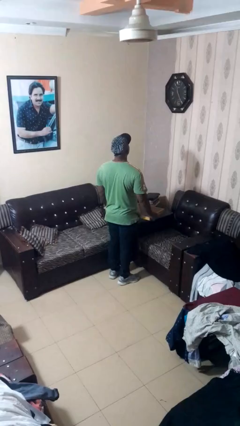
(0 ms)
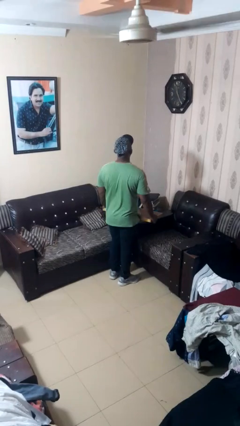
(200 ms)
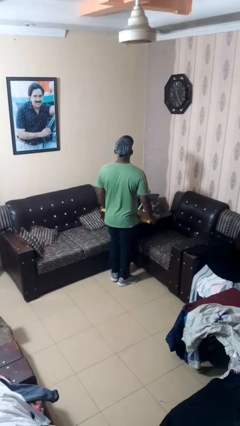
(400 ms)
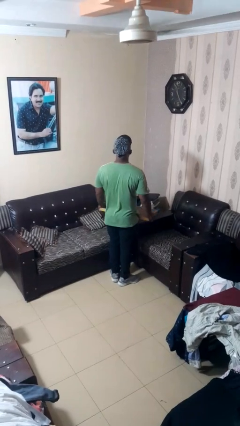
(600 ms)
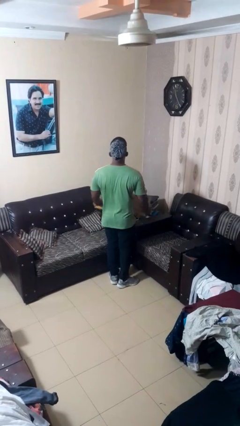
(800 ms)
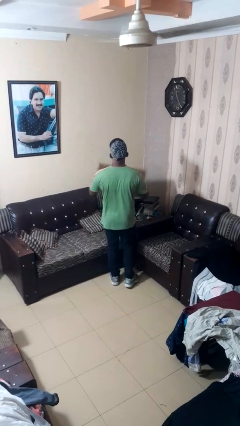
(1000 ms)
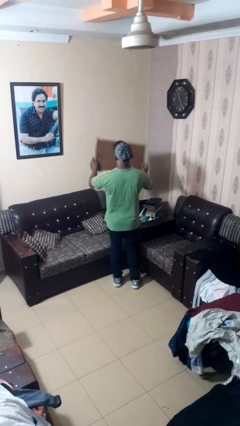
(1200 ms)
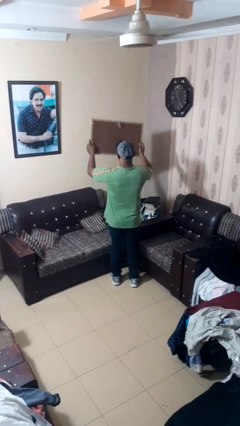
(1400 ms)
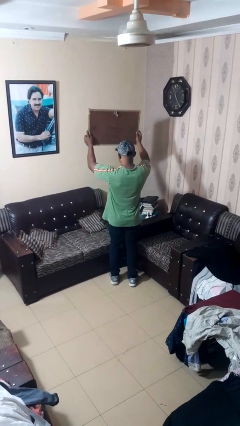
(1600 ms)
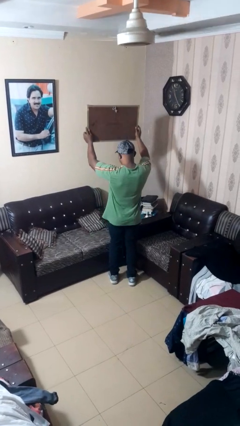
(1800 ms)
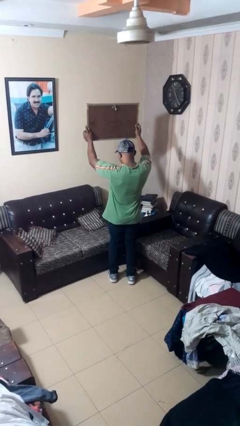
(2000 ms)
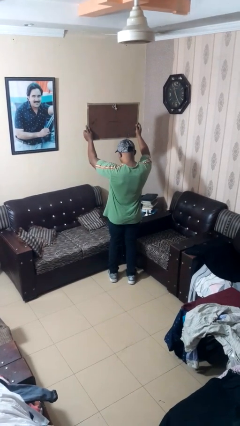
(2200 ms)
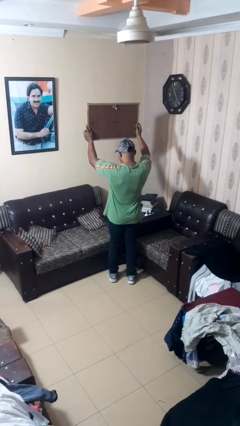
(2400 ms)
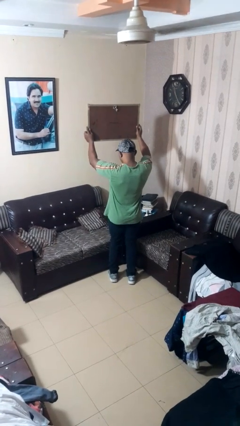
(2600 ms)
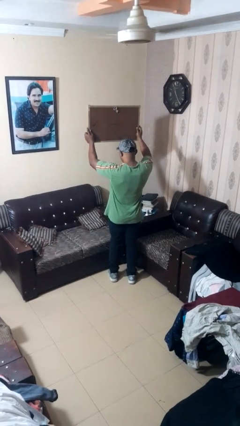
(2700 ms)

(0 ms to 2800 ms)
person holds object above head

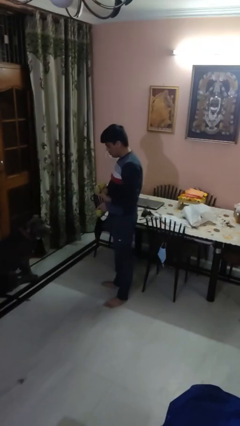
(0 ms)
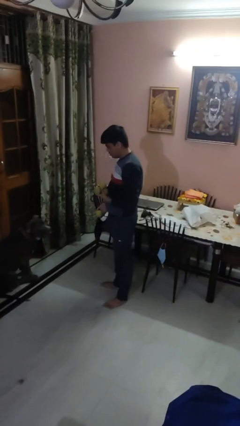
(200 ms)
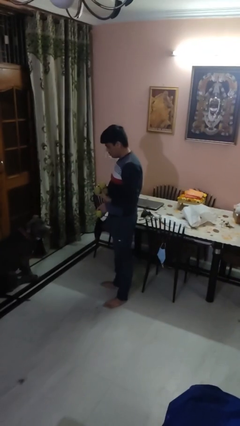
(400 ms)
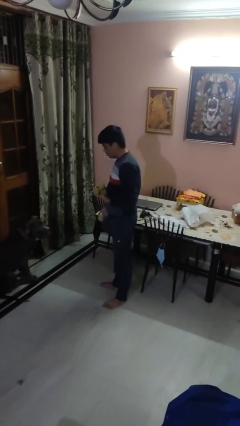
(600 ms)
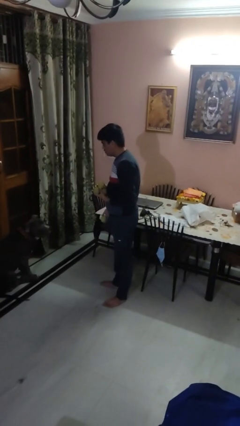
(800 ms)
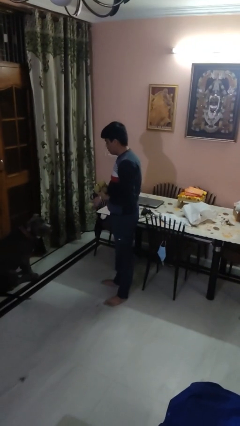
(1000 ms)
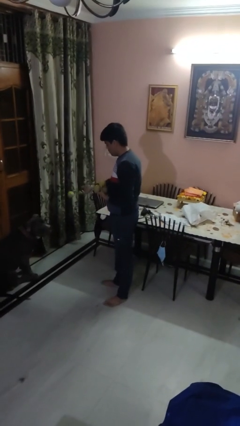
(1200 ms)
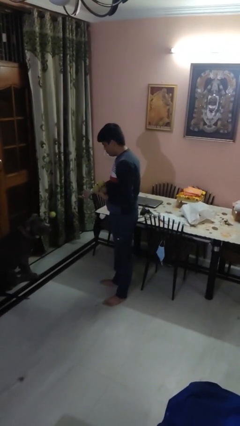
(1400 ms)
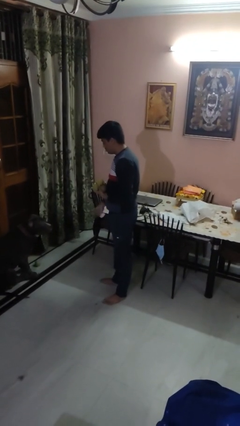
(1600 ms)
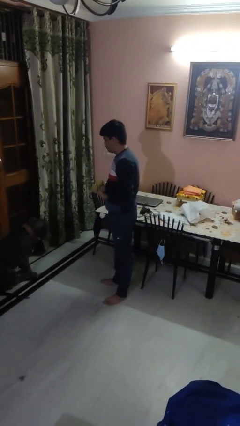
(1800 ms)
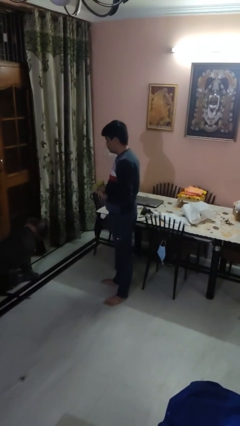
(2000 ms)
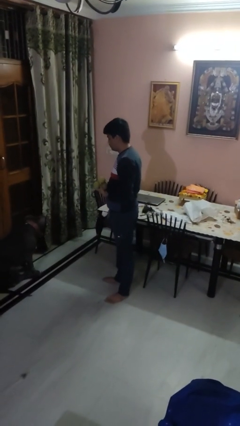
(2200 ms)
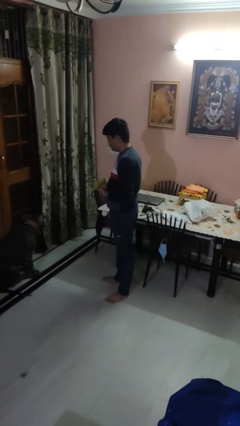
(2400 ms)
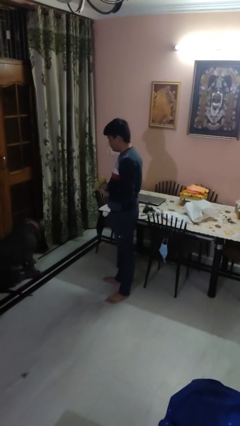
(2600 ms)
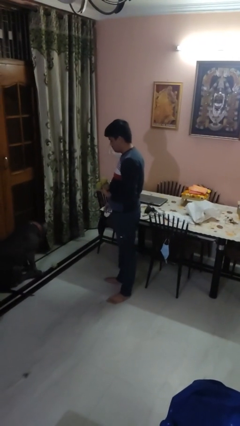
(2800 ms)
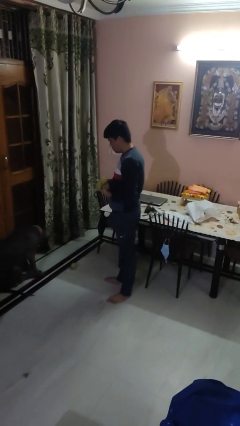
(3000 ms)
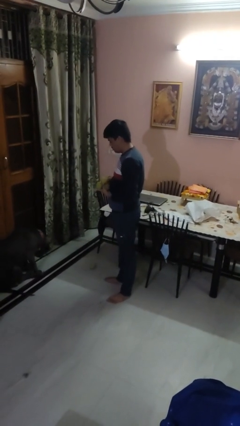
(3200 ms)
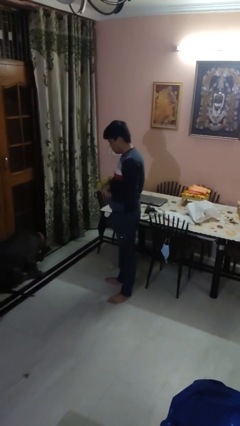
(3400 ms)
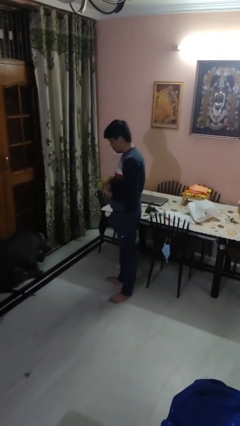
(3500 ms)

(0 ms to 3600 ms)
person throws object to dog

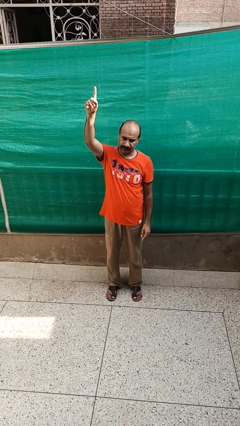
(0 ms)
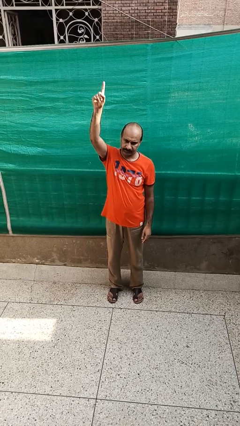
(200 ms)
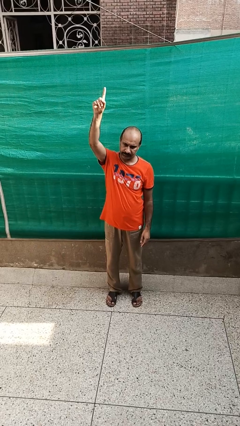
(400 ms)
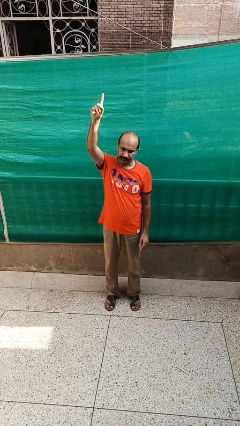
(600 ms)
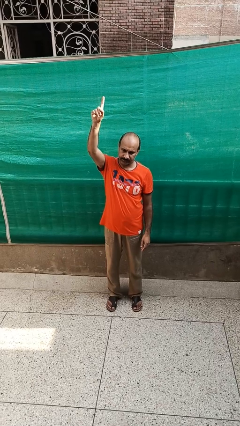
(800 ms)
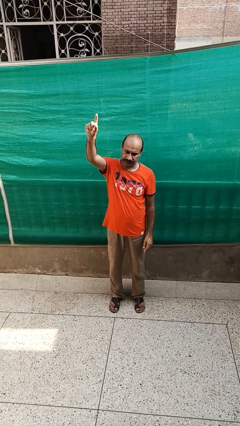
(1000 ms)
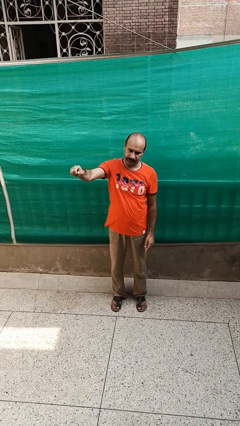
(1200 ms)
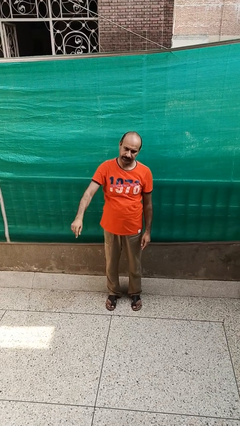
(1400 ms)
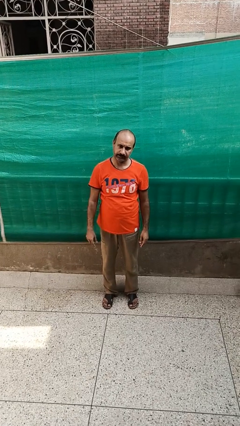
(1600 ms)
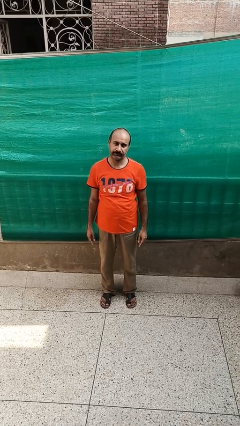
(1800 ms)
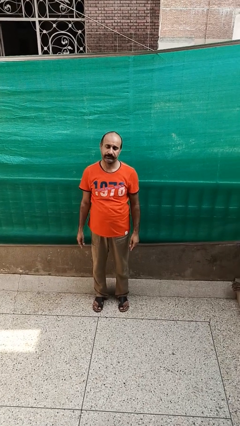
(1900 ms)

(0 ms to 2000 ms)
person gestures raise hand

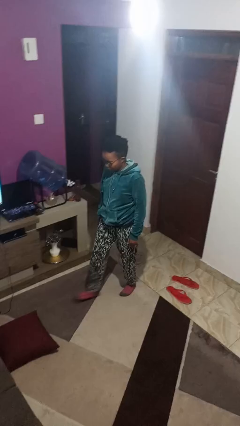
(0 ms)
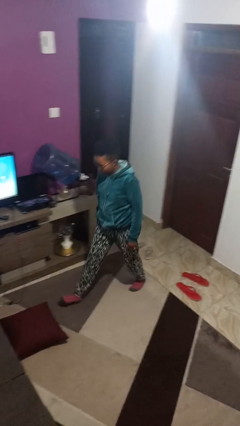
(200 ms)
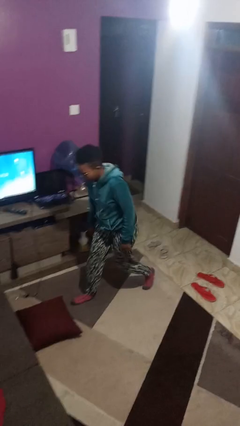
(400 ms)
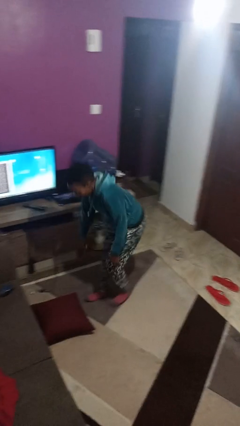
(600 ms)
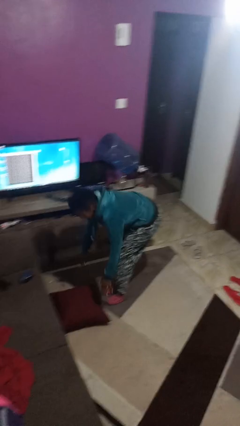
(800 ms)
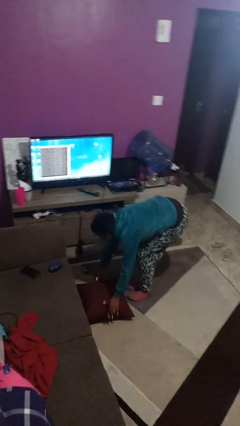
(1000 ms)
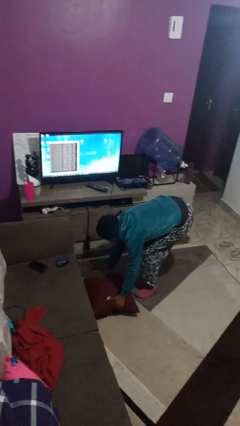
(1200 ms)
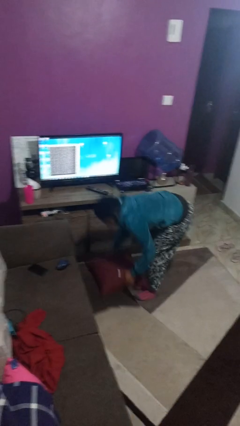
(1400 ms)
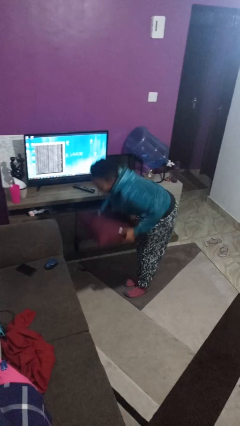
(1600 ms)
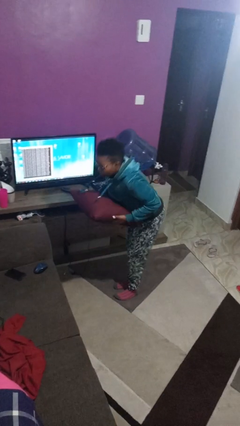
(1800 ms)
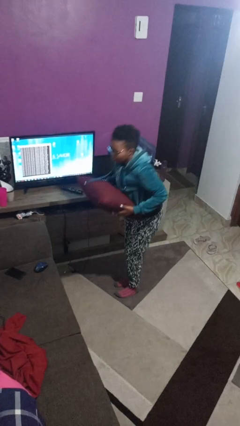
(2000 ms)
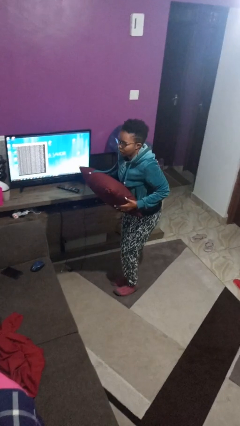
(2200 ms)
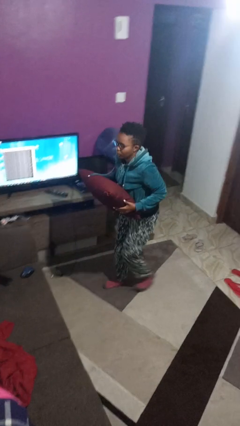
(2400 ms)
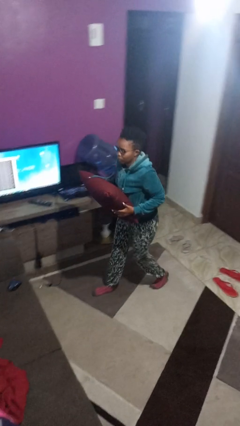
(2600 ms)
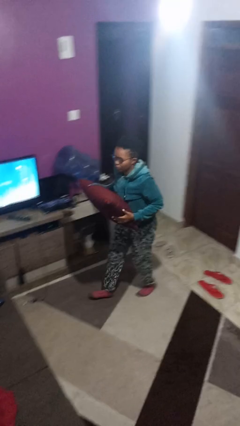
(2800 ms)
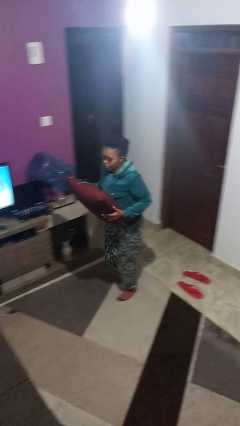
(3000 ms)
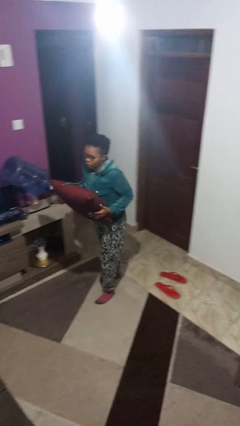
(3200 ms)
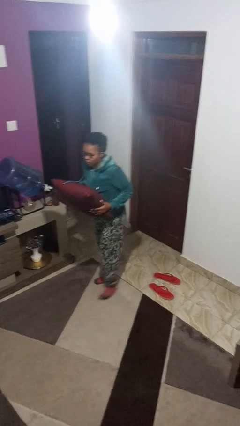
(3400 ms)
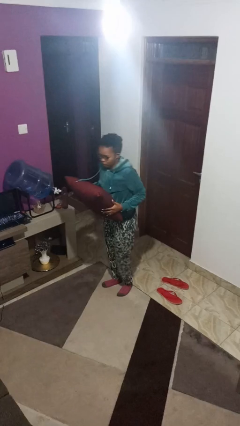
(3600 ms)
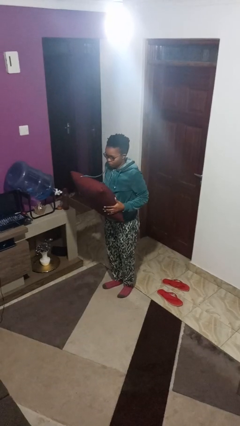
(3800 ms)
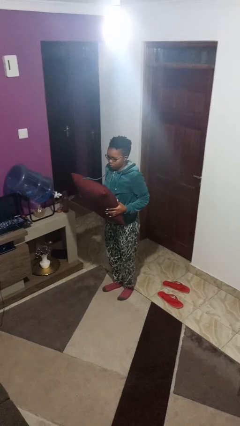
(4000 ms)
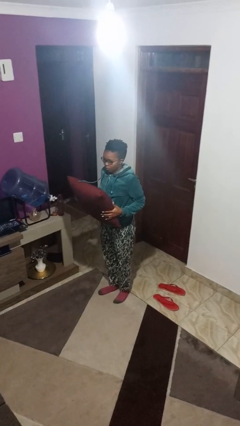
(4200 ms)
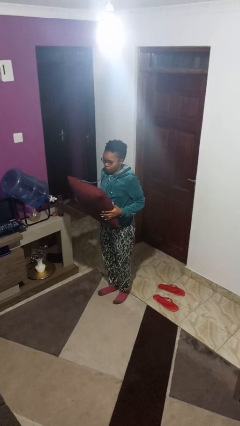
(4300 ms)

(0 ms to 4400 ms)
person picks up object from floor

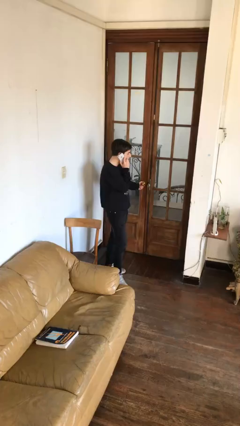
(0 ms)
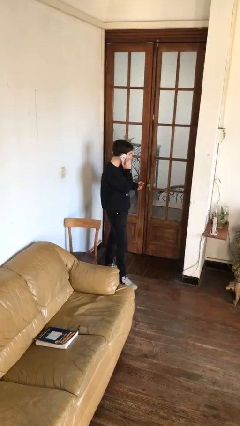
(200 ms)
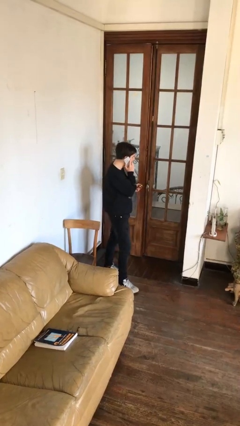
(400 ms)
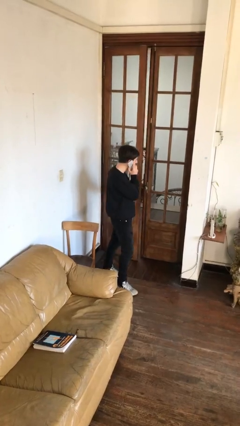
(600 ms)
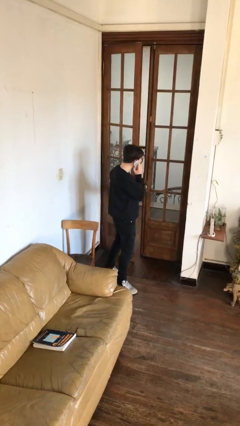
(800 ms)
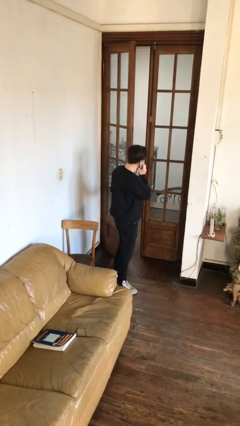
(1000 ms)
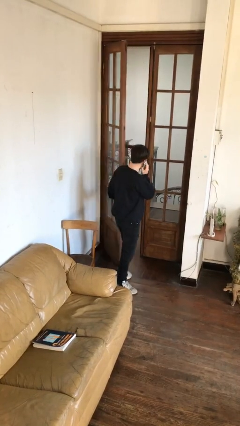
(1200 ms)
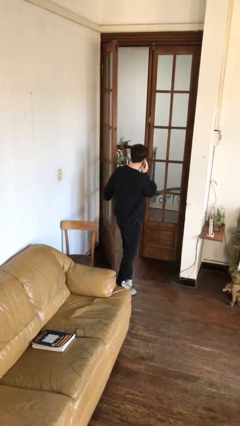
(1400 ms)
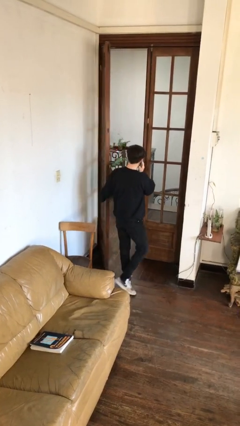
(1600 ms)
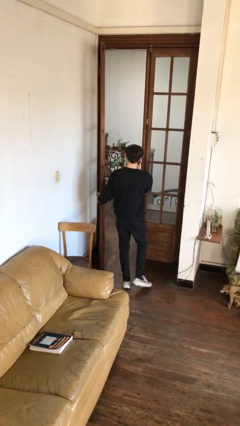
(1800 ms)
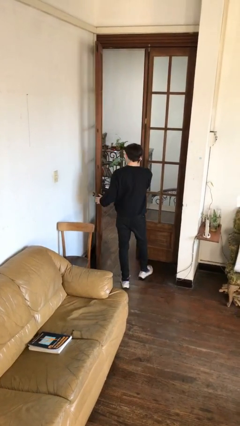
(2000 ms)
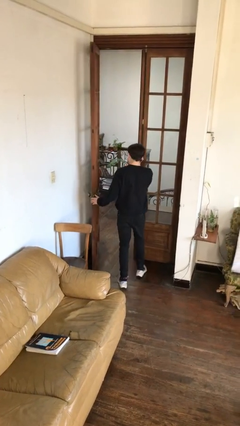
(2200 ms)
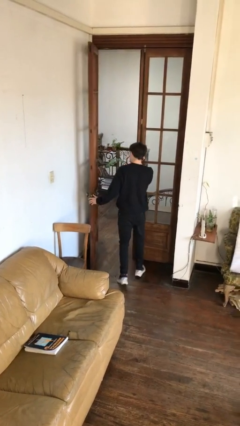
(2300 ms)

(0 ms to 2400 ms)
person opens facility door

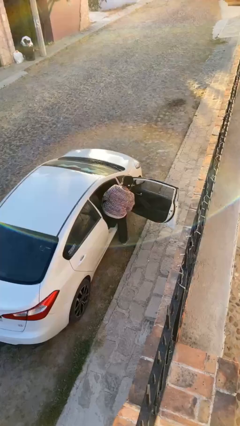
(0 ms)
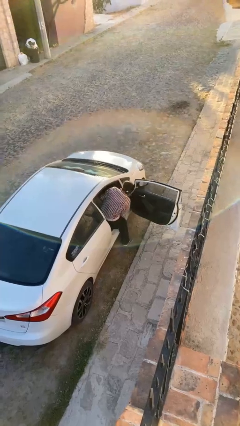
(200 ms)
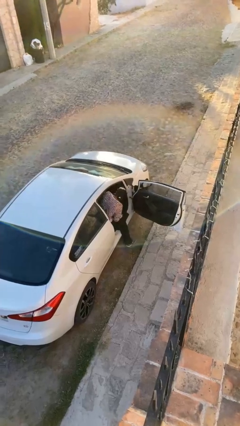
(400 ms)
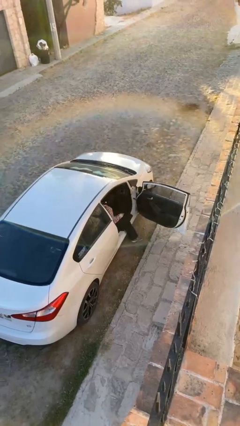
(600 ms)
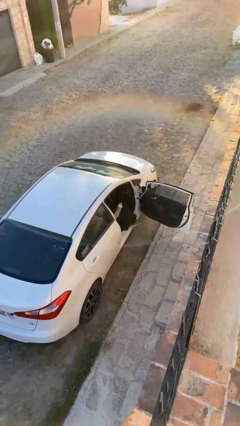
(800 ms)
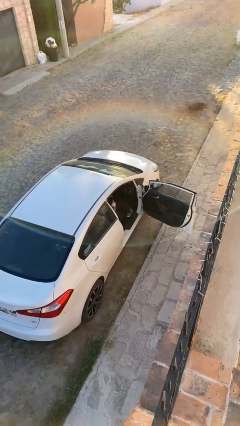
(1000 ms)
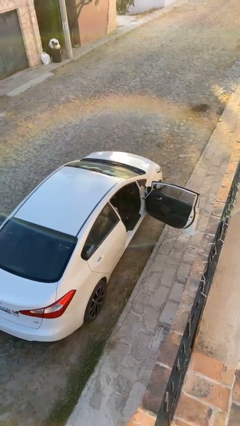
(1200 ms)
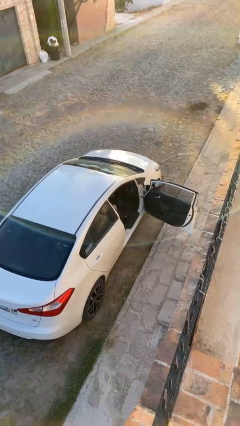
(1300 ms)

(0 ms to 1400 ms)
person enters car

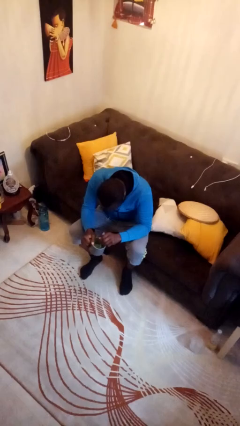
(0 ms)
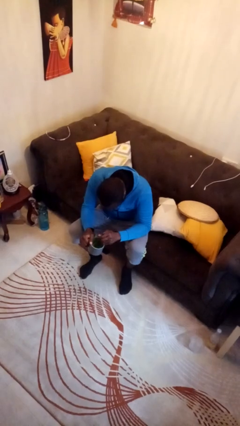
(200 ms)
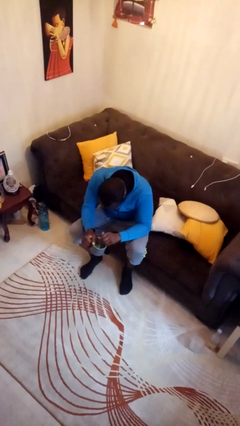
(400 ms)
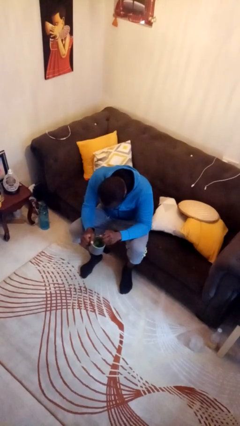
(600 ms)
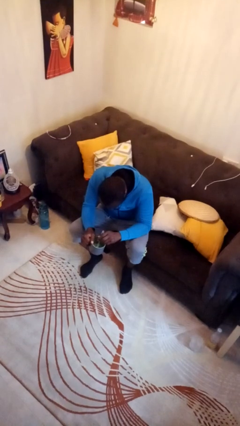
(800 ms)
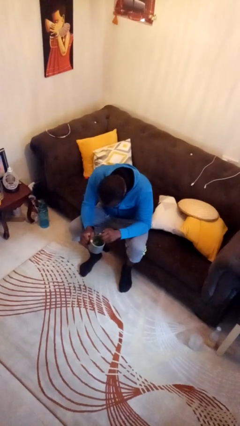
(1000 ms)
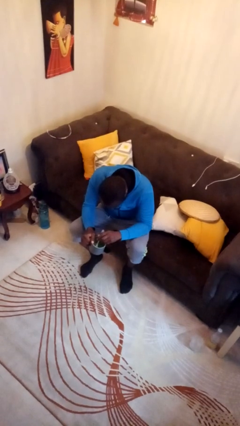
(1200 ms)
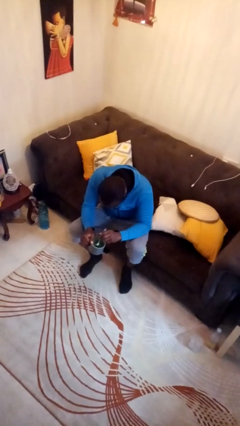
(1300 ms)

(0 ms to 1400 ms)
person stirs mug
